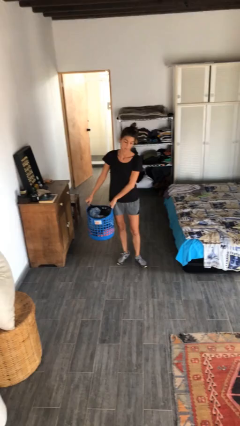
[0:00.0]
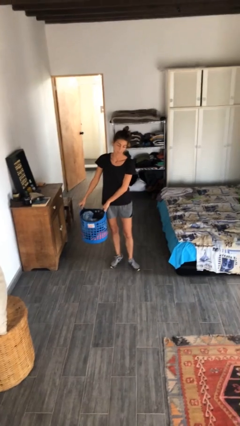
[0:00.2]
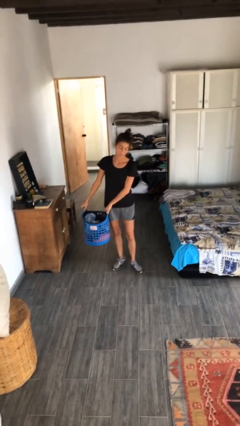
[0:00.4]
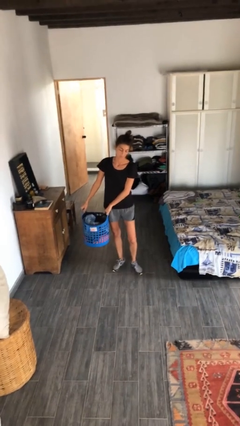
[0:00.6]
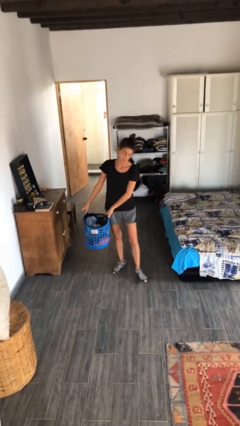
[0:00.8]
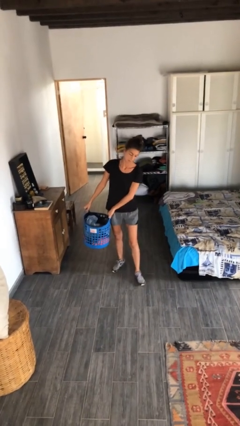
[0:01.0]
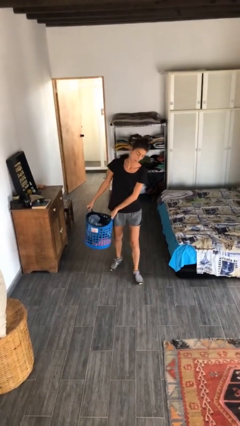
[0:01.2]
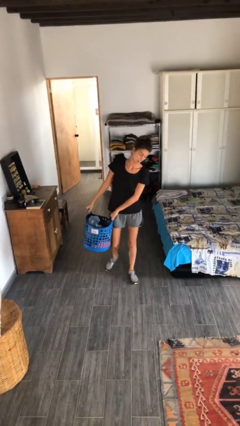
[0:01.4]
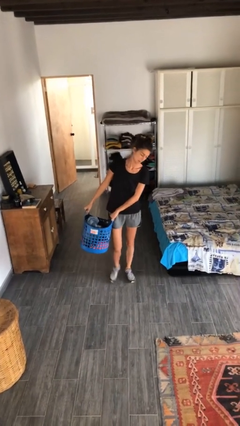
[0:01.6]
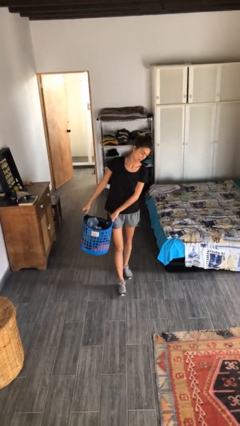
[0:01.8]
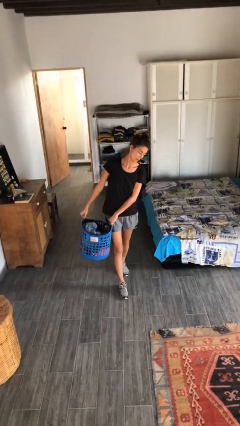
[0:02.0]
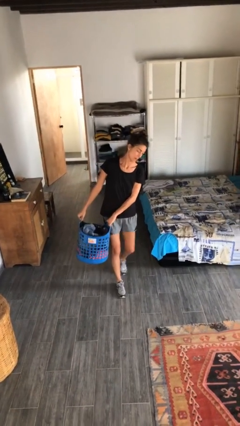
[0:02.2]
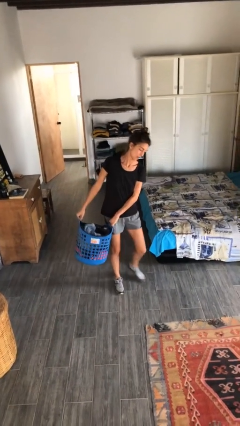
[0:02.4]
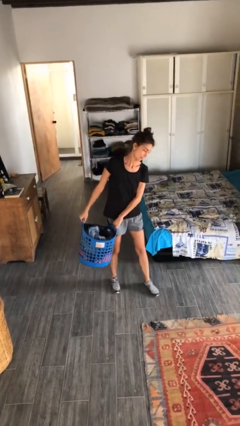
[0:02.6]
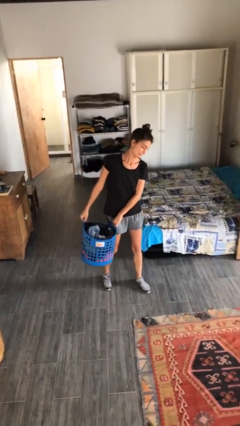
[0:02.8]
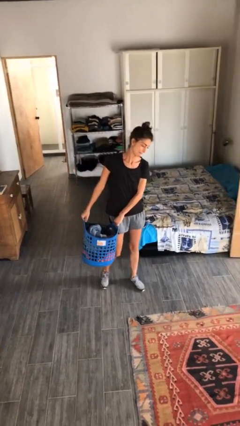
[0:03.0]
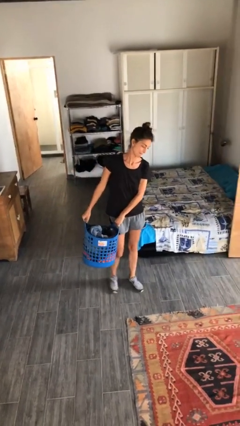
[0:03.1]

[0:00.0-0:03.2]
person carries laundry basket

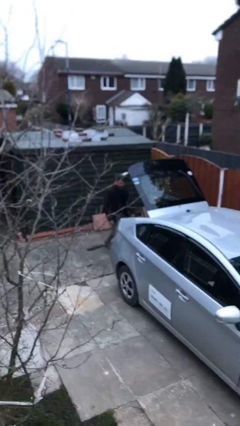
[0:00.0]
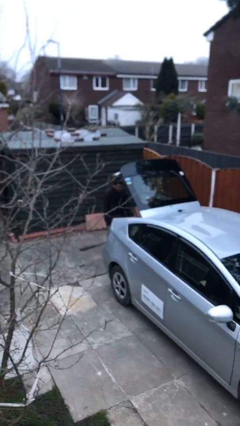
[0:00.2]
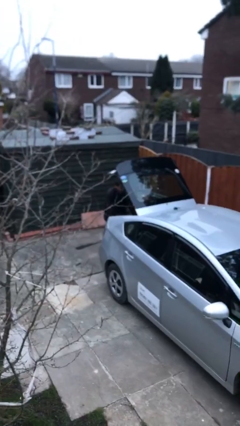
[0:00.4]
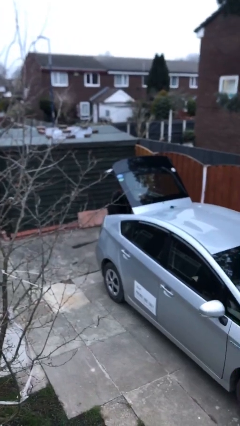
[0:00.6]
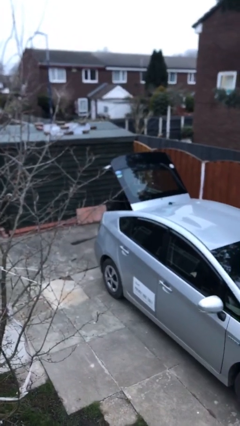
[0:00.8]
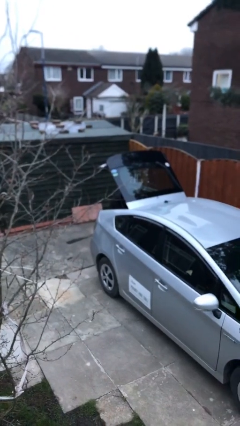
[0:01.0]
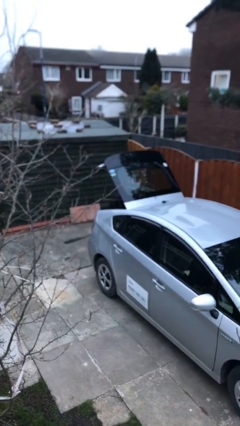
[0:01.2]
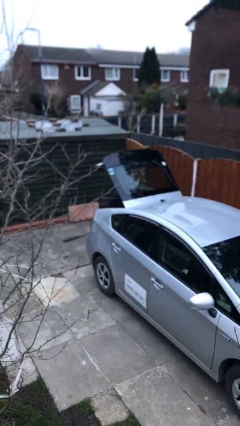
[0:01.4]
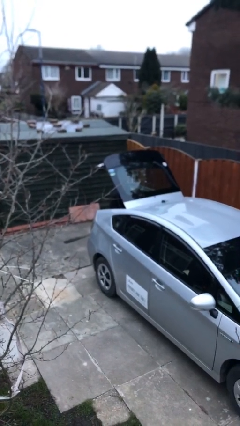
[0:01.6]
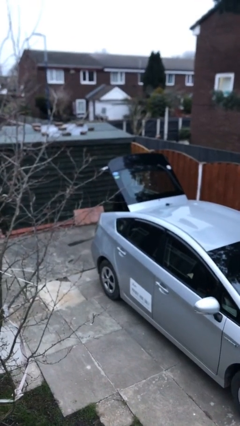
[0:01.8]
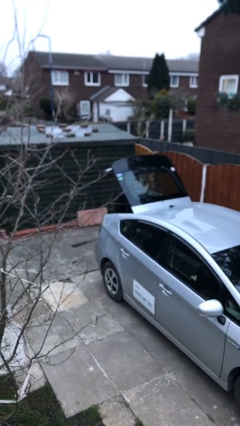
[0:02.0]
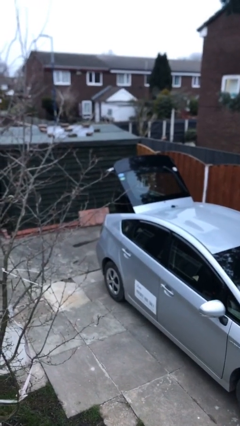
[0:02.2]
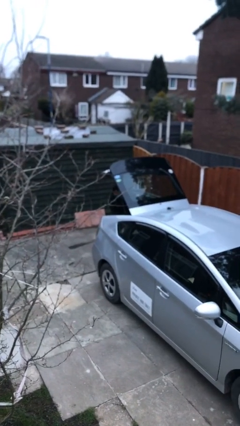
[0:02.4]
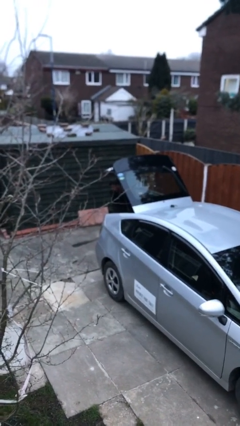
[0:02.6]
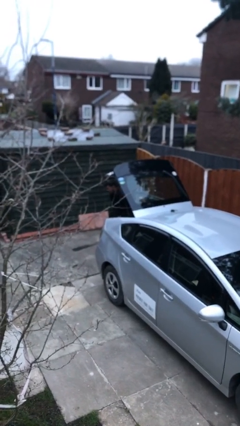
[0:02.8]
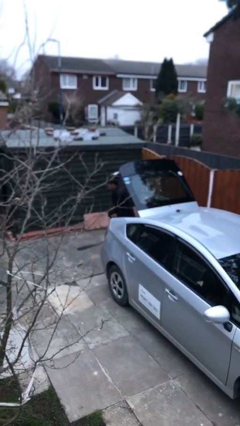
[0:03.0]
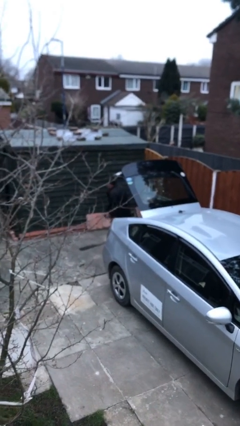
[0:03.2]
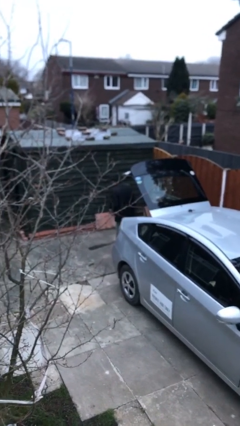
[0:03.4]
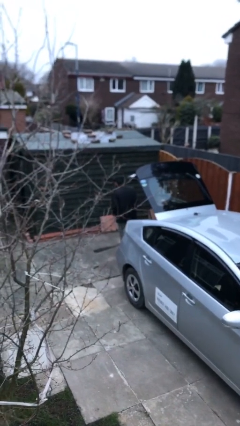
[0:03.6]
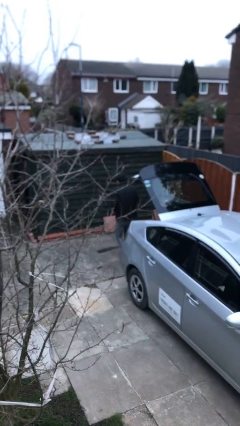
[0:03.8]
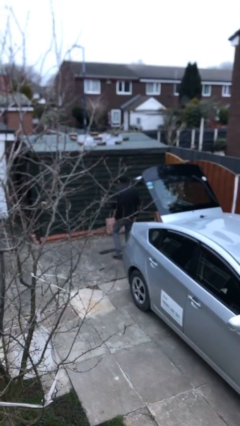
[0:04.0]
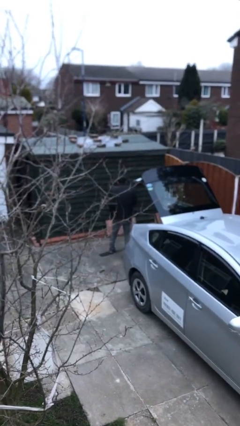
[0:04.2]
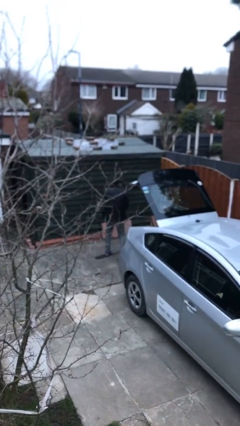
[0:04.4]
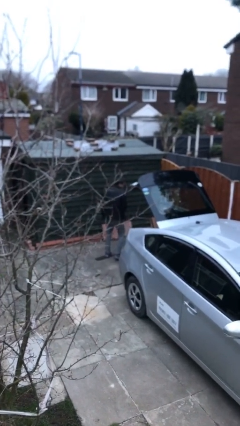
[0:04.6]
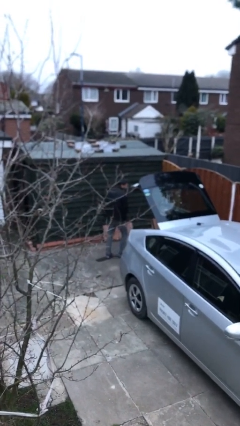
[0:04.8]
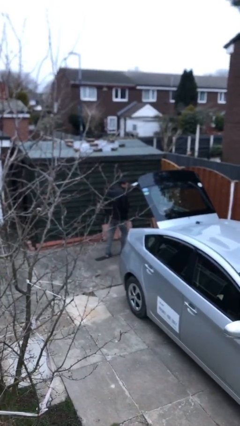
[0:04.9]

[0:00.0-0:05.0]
person unloads car

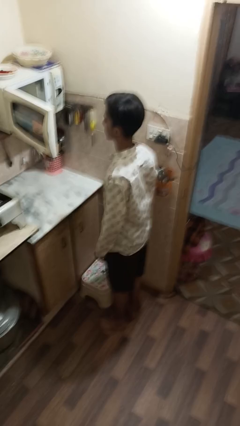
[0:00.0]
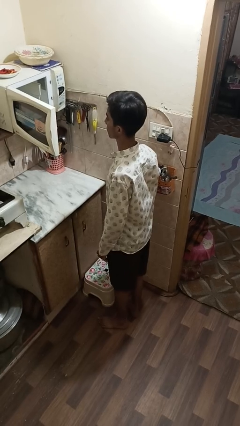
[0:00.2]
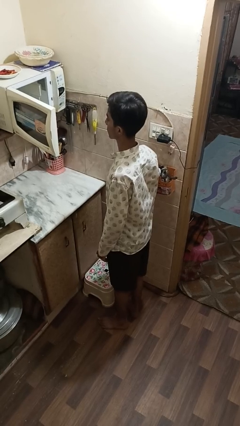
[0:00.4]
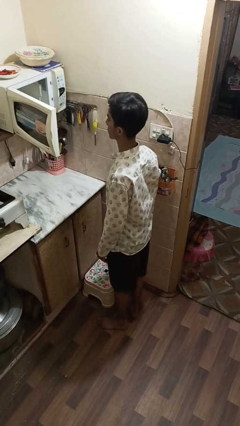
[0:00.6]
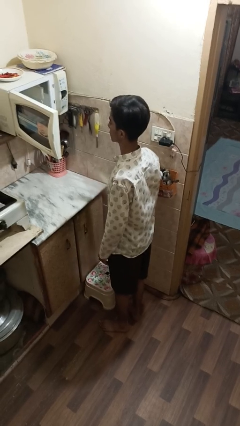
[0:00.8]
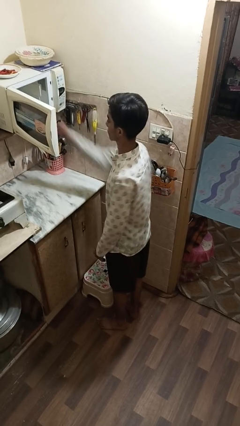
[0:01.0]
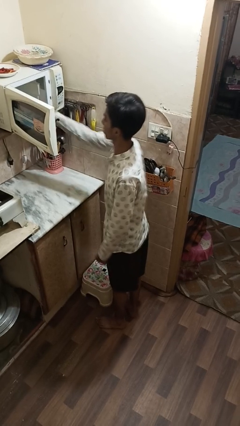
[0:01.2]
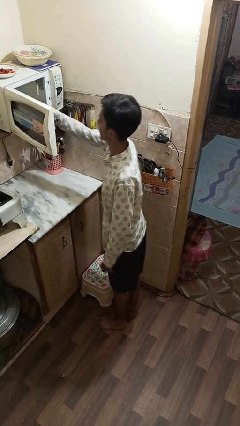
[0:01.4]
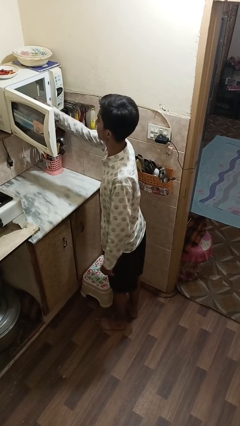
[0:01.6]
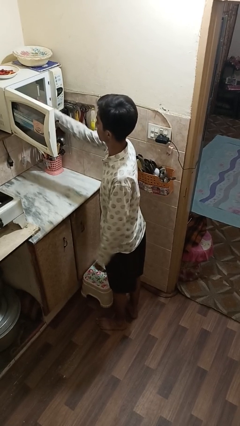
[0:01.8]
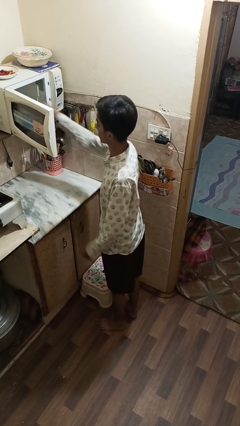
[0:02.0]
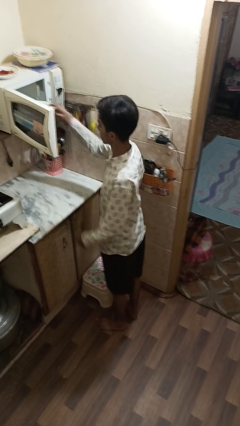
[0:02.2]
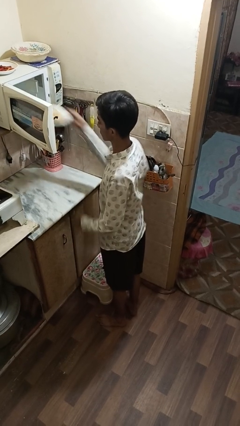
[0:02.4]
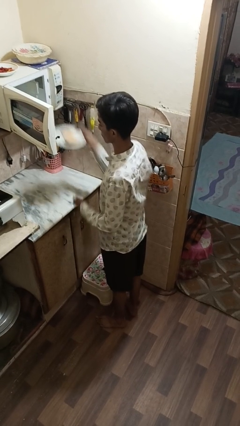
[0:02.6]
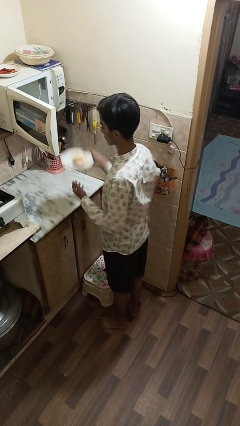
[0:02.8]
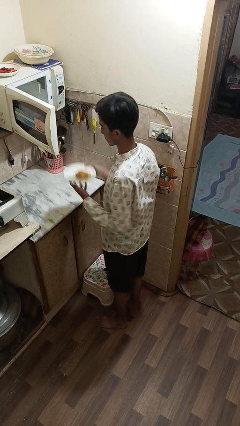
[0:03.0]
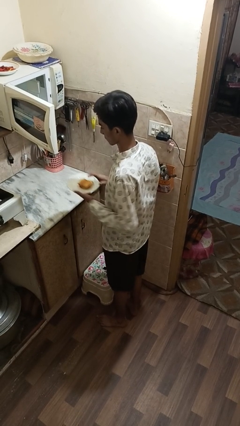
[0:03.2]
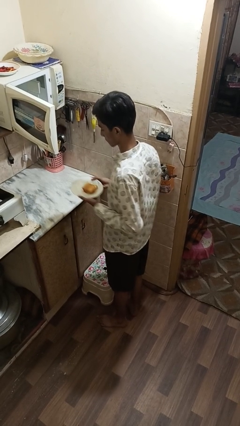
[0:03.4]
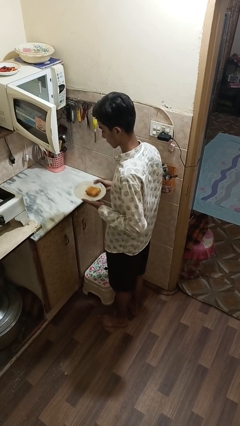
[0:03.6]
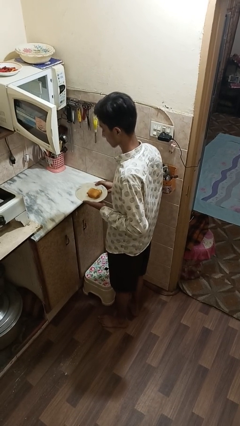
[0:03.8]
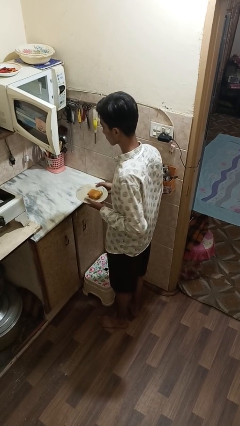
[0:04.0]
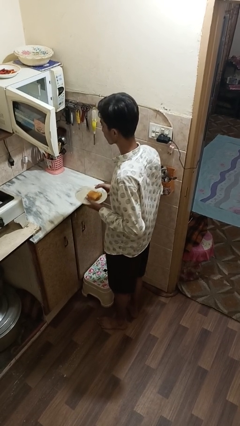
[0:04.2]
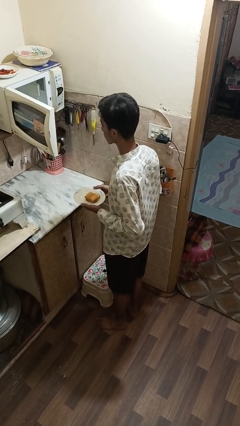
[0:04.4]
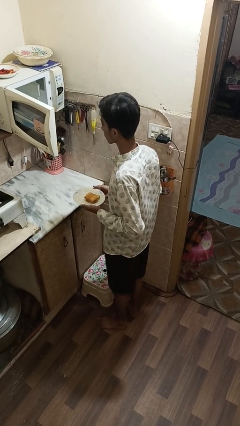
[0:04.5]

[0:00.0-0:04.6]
person takes object from microwave

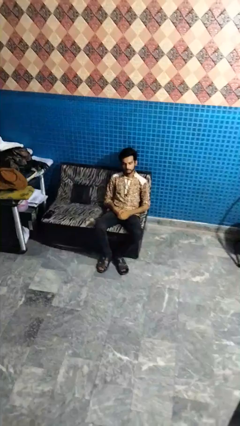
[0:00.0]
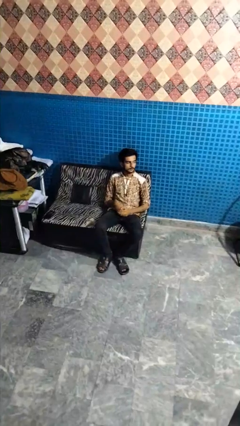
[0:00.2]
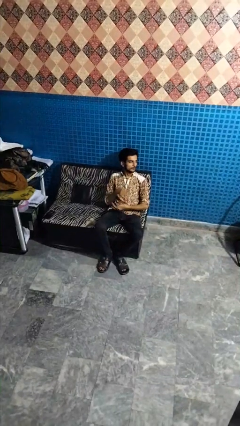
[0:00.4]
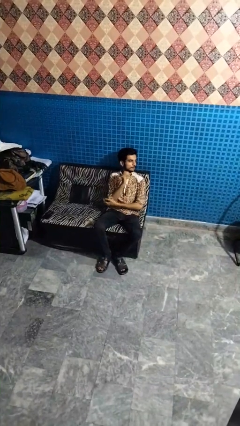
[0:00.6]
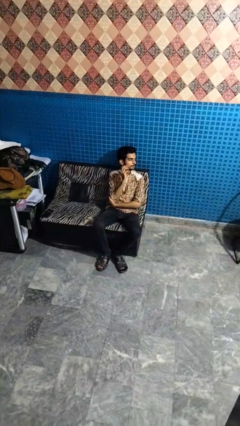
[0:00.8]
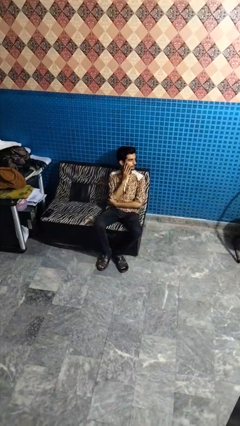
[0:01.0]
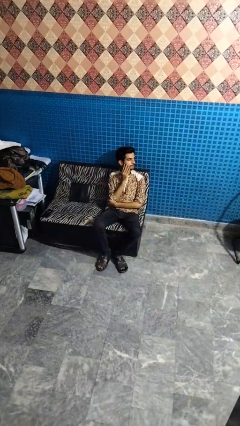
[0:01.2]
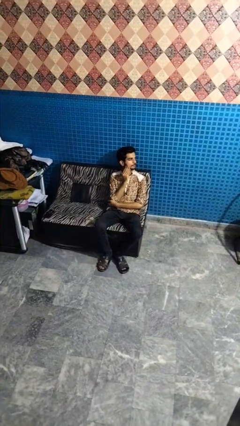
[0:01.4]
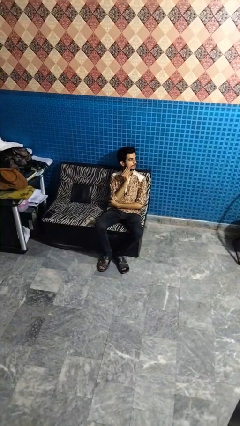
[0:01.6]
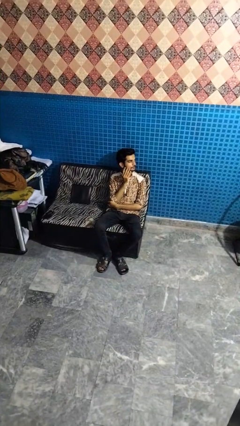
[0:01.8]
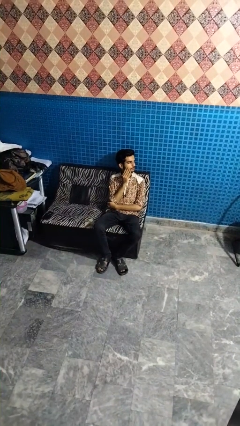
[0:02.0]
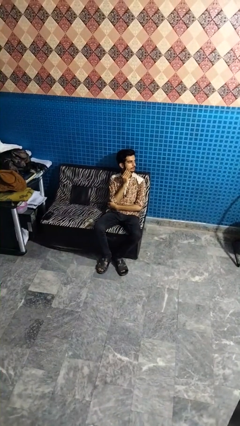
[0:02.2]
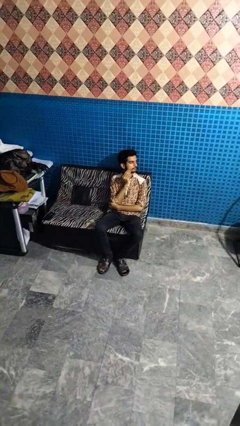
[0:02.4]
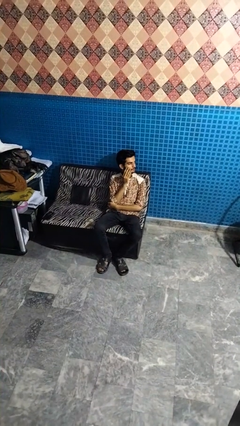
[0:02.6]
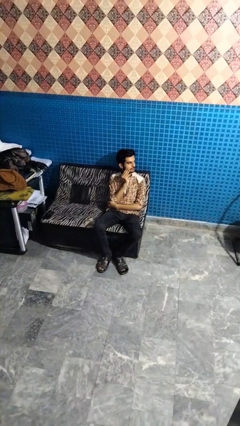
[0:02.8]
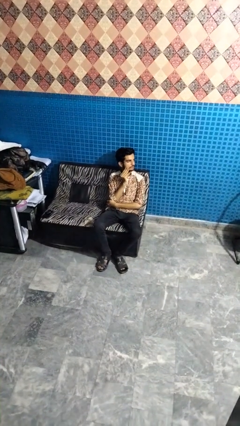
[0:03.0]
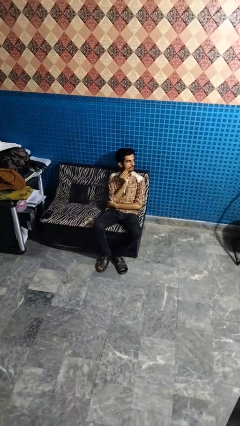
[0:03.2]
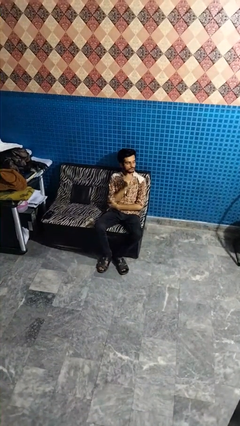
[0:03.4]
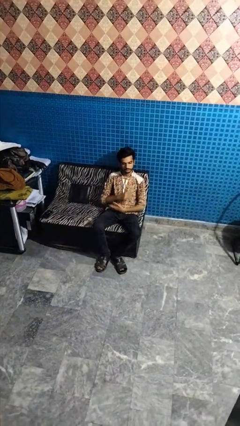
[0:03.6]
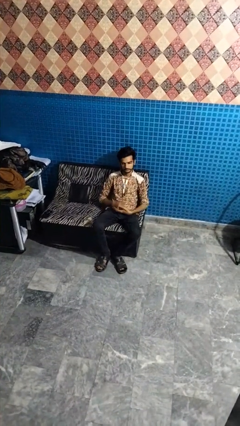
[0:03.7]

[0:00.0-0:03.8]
person strokes chin

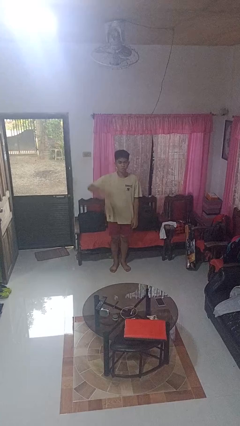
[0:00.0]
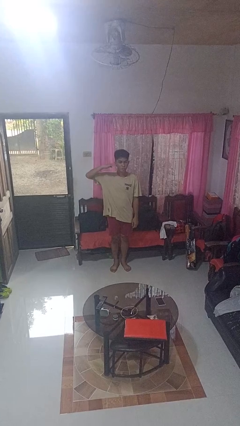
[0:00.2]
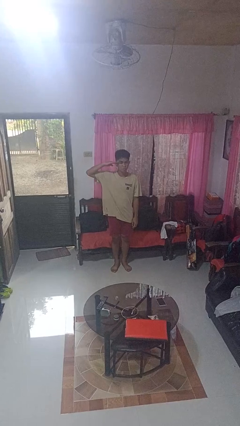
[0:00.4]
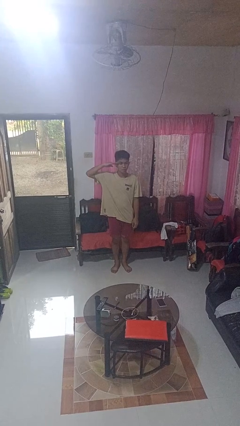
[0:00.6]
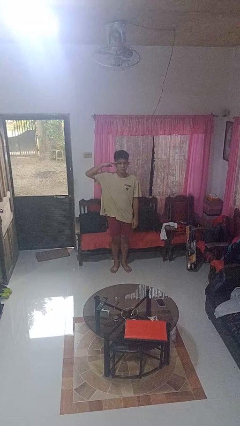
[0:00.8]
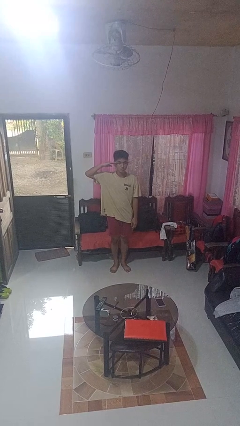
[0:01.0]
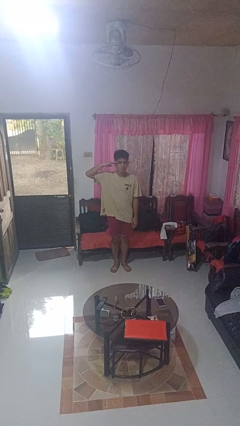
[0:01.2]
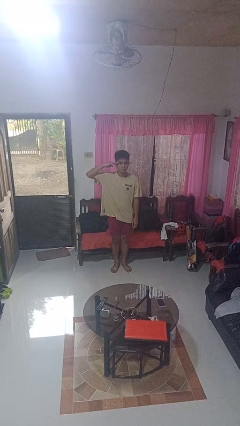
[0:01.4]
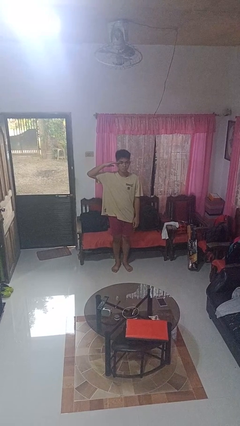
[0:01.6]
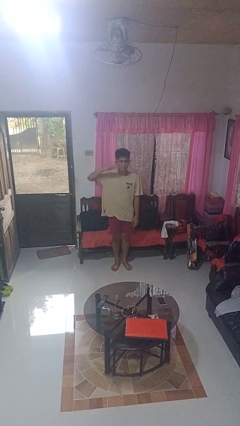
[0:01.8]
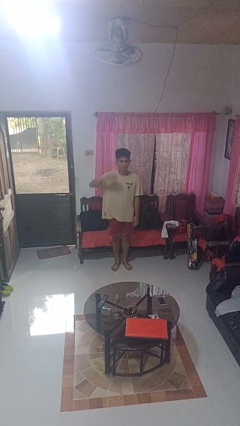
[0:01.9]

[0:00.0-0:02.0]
person salutes
